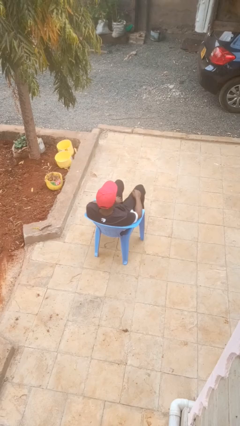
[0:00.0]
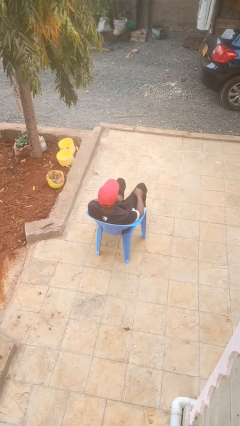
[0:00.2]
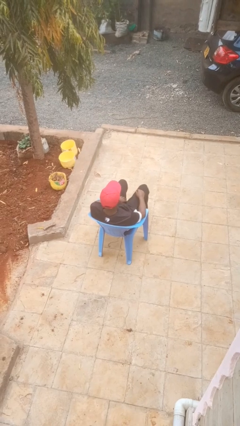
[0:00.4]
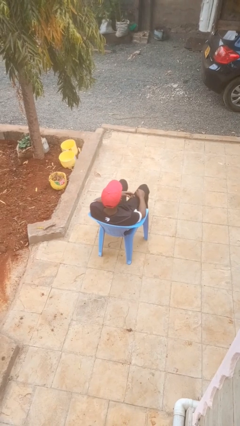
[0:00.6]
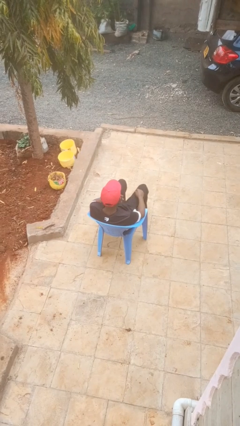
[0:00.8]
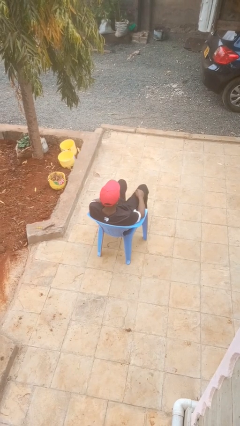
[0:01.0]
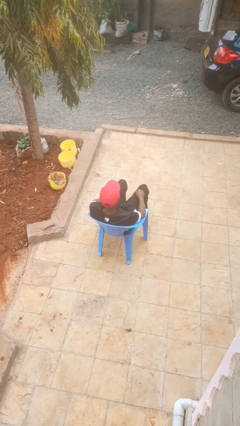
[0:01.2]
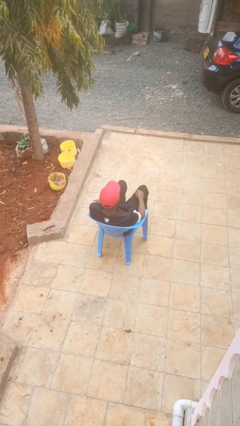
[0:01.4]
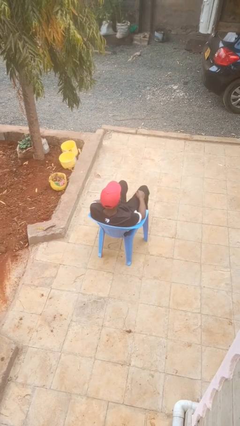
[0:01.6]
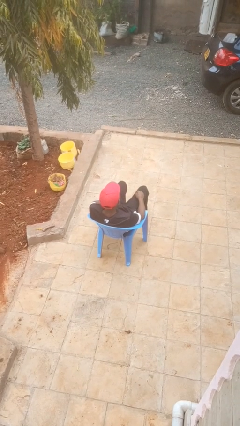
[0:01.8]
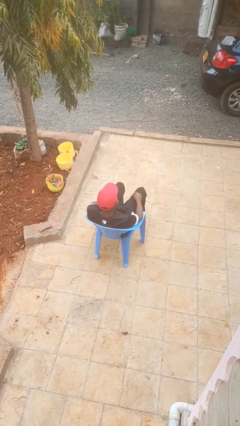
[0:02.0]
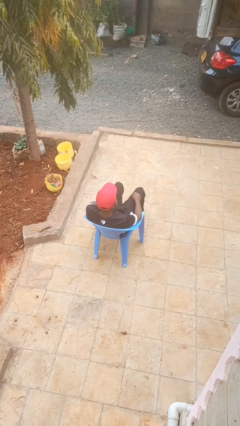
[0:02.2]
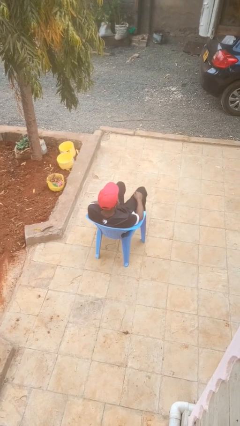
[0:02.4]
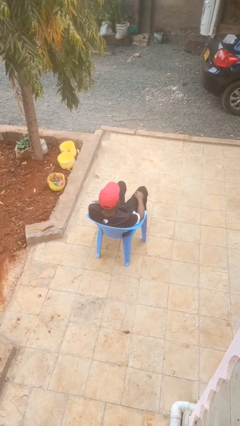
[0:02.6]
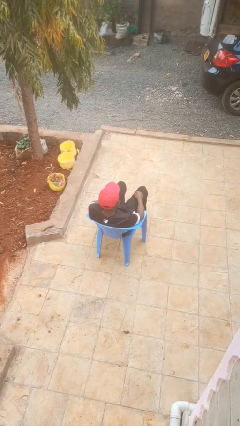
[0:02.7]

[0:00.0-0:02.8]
person strokes chin

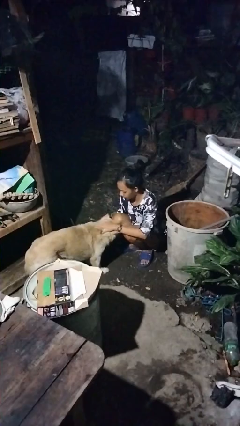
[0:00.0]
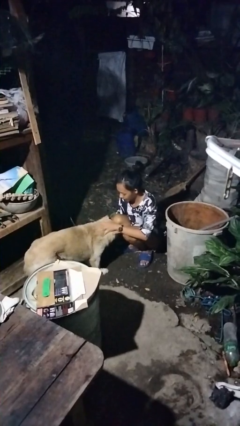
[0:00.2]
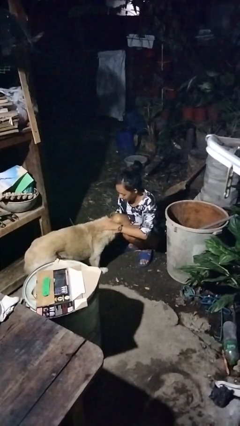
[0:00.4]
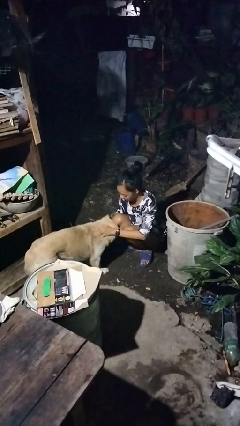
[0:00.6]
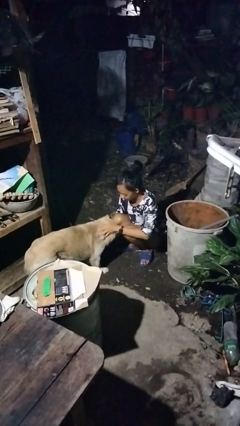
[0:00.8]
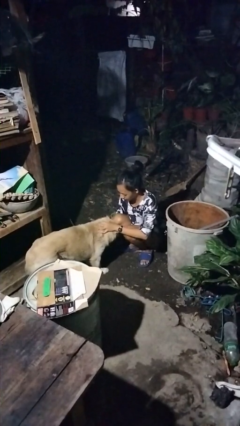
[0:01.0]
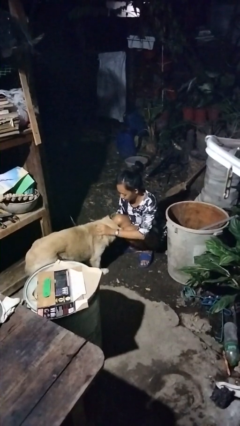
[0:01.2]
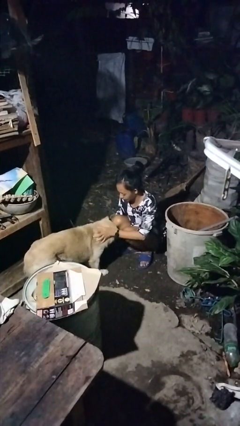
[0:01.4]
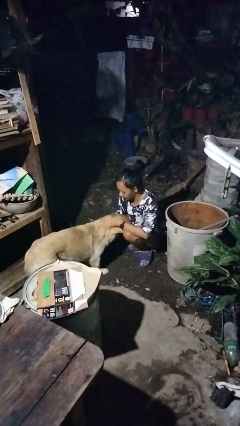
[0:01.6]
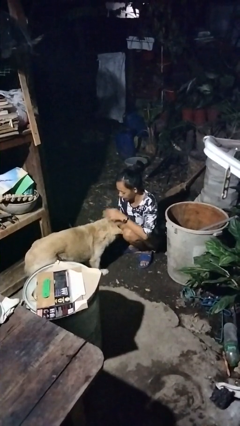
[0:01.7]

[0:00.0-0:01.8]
person pets dog

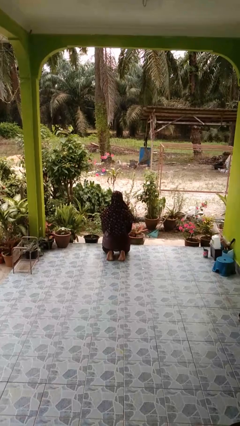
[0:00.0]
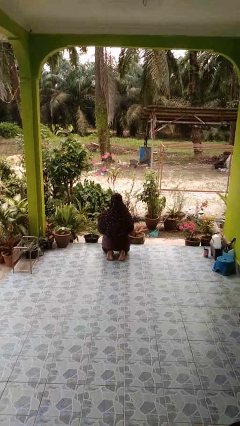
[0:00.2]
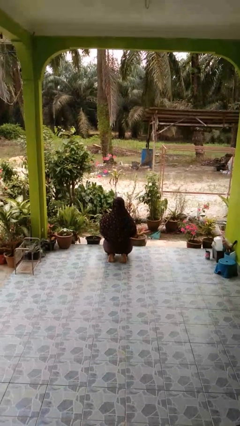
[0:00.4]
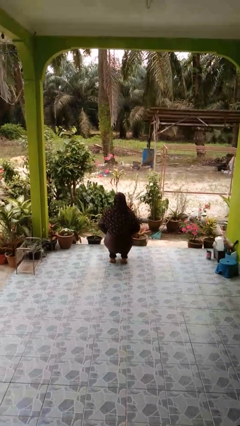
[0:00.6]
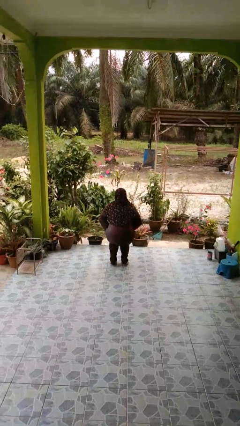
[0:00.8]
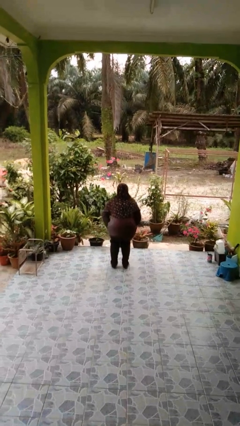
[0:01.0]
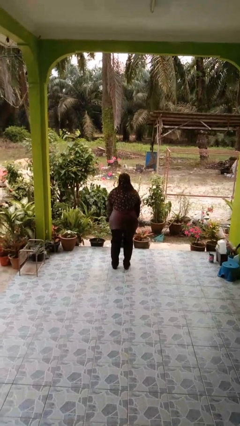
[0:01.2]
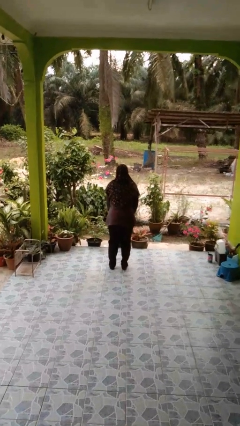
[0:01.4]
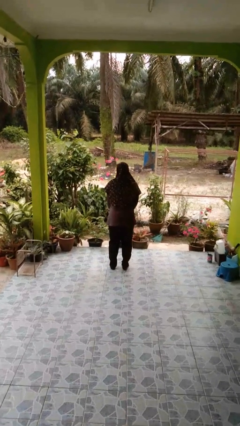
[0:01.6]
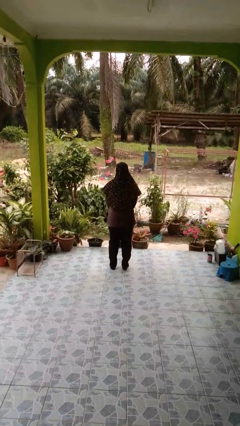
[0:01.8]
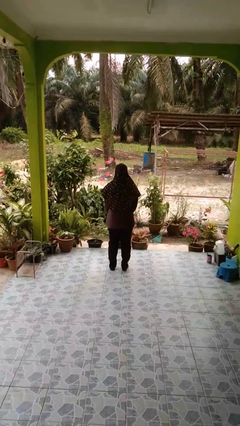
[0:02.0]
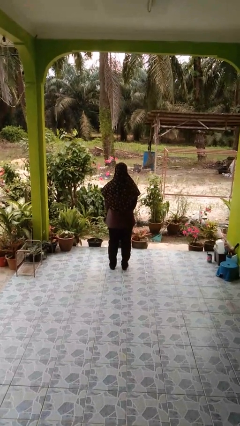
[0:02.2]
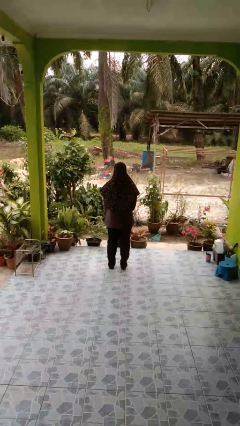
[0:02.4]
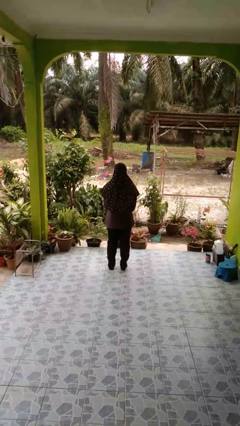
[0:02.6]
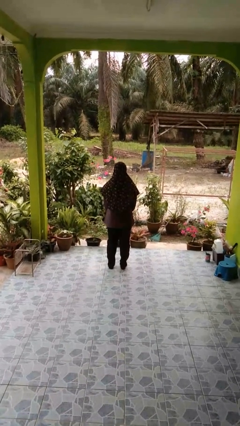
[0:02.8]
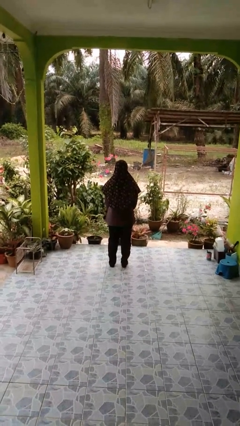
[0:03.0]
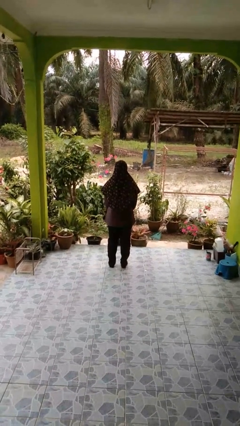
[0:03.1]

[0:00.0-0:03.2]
person stands up from floor

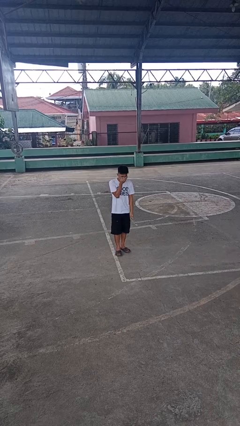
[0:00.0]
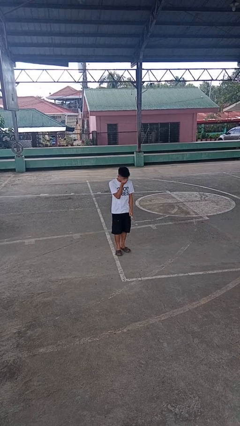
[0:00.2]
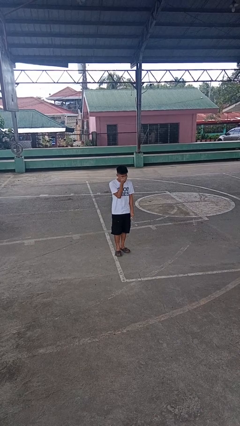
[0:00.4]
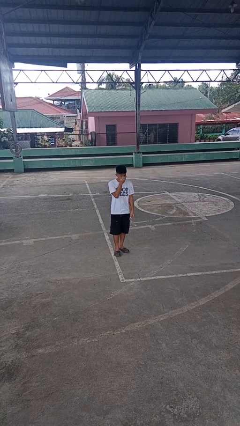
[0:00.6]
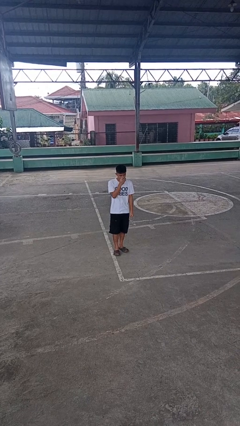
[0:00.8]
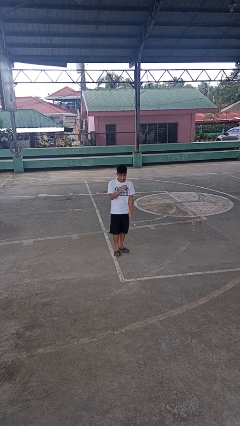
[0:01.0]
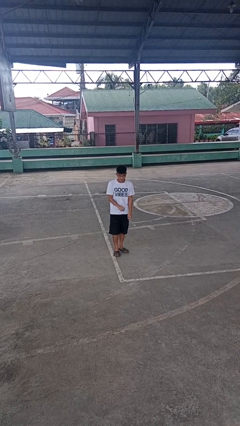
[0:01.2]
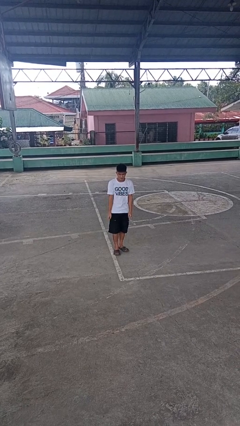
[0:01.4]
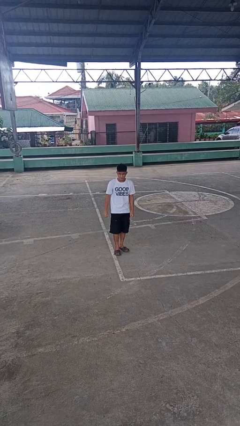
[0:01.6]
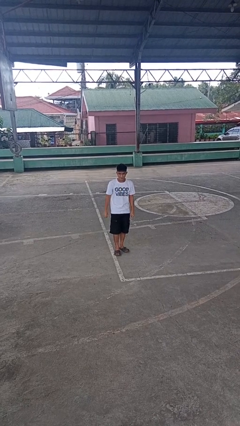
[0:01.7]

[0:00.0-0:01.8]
person sneezes into hand

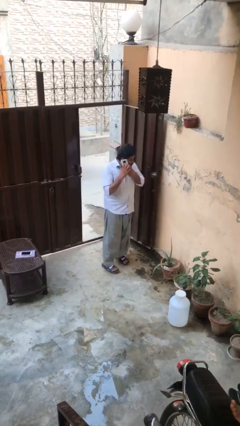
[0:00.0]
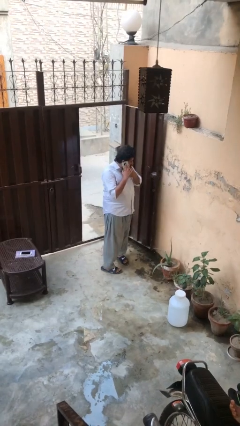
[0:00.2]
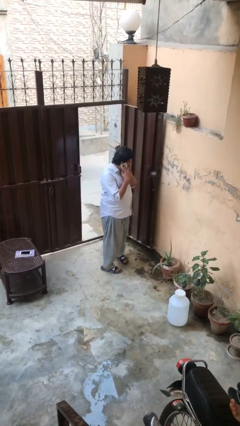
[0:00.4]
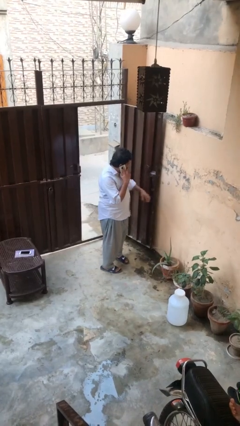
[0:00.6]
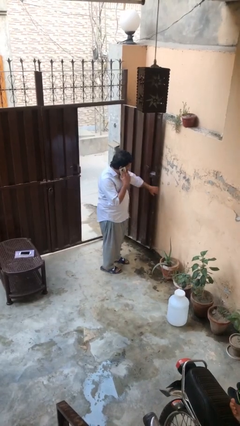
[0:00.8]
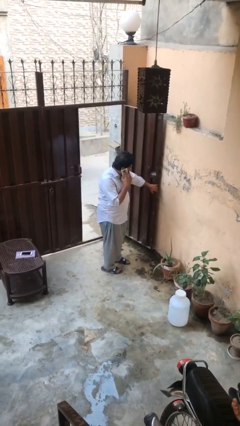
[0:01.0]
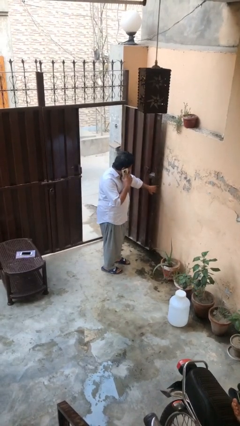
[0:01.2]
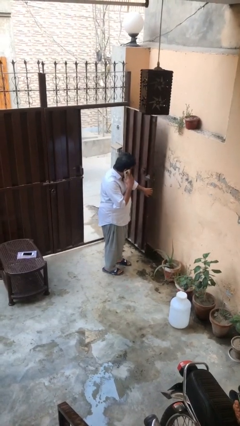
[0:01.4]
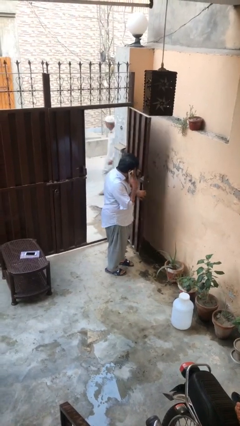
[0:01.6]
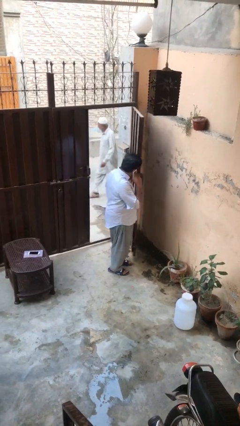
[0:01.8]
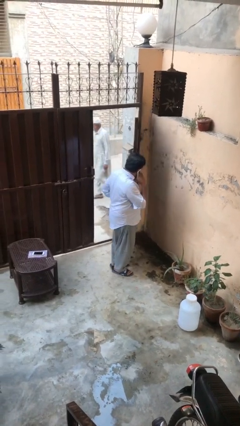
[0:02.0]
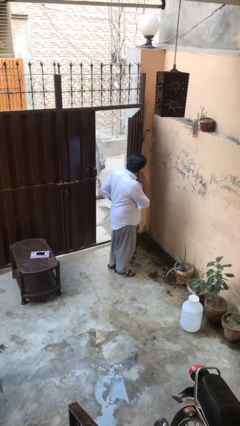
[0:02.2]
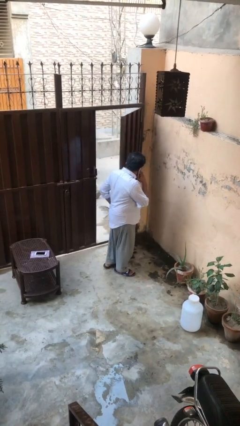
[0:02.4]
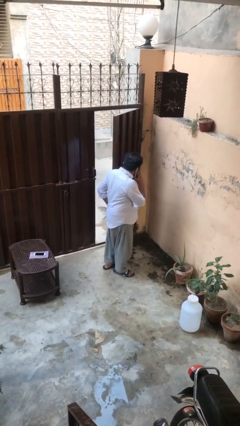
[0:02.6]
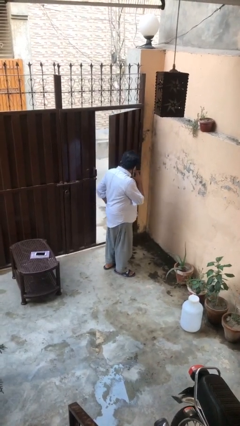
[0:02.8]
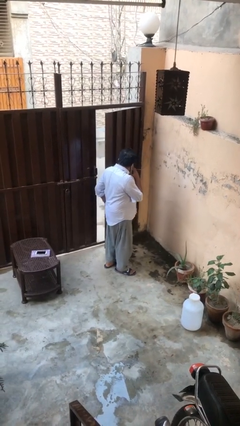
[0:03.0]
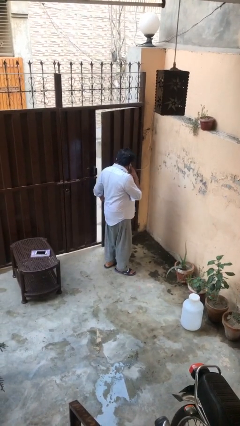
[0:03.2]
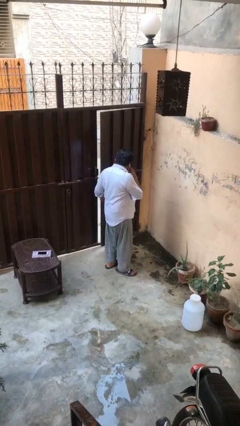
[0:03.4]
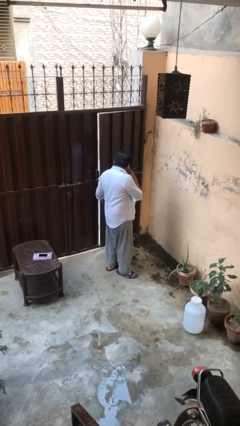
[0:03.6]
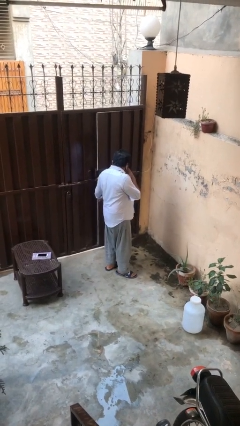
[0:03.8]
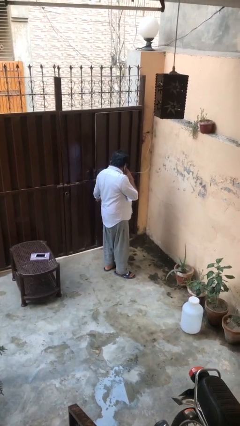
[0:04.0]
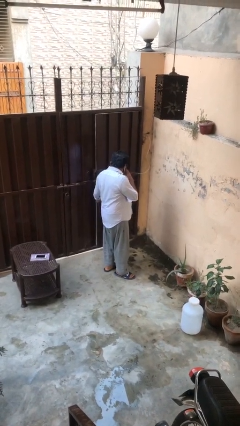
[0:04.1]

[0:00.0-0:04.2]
person closes facility door

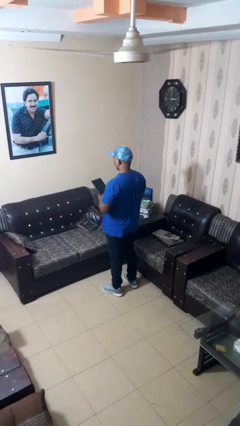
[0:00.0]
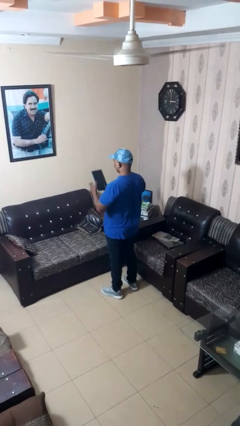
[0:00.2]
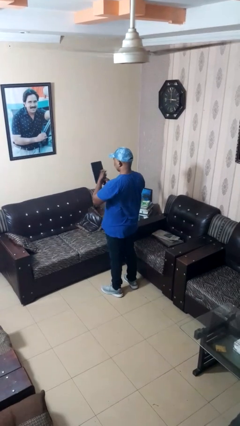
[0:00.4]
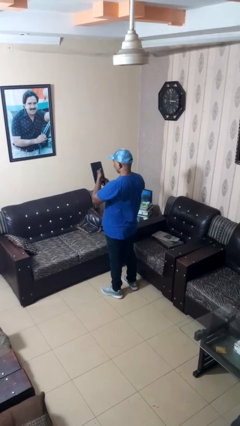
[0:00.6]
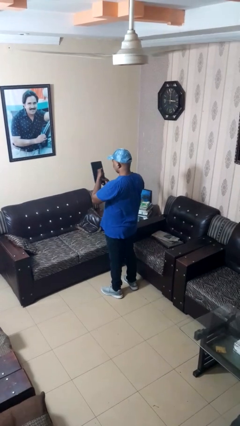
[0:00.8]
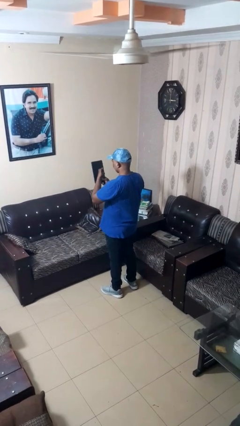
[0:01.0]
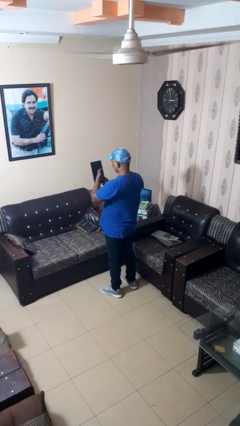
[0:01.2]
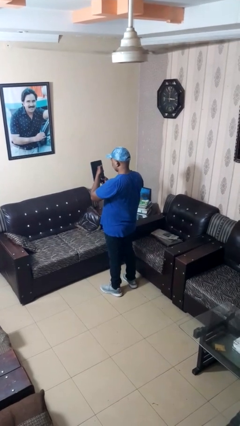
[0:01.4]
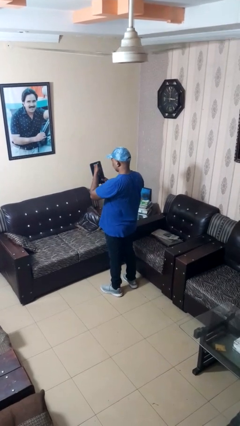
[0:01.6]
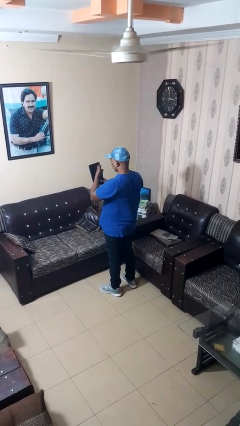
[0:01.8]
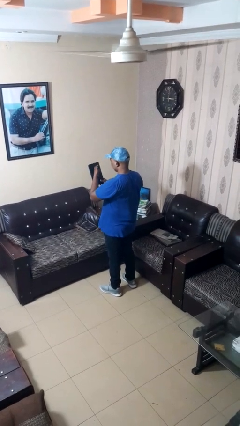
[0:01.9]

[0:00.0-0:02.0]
person taps object with finger

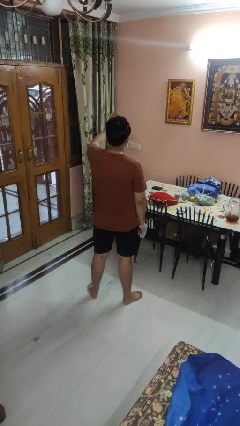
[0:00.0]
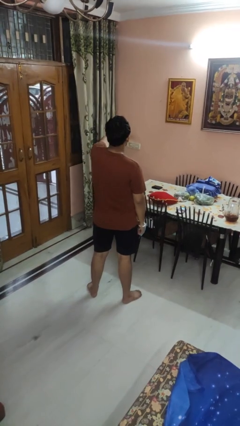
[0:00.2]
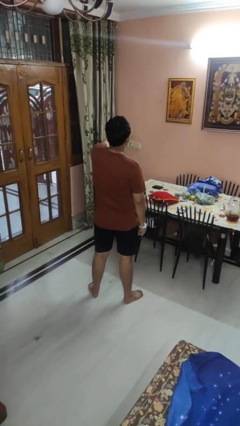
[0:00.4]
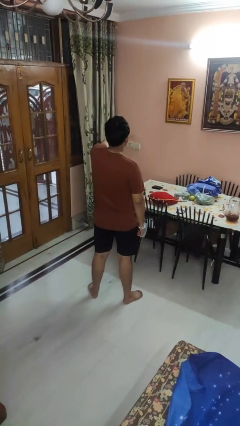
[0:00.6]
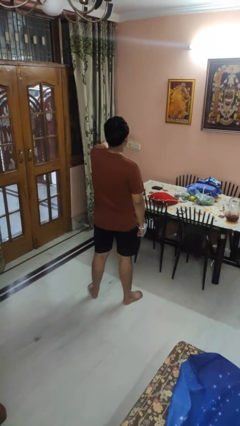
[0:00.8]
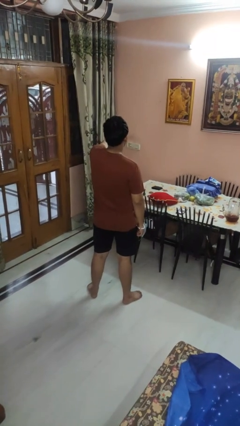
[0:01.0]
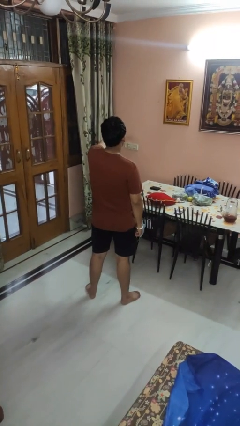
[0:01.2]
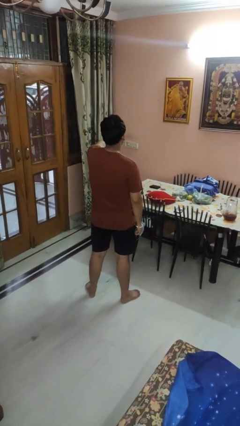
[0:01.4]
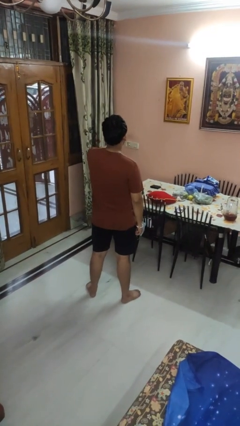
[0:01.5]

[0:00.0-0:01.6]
person gestures stop
